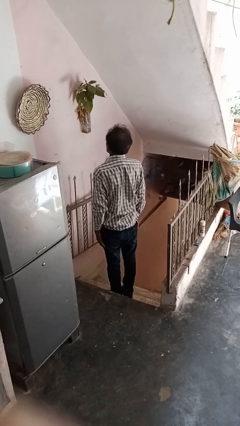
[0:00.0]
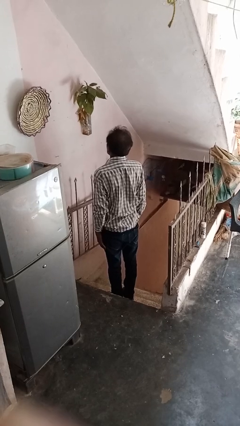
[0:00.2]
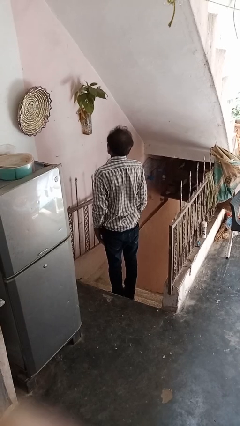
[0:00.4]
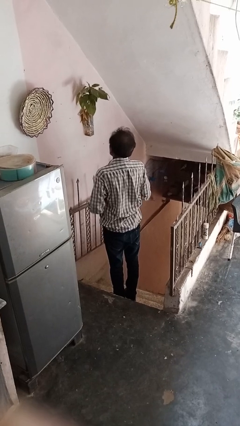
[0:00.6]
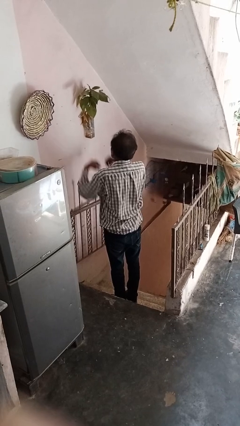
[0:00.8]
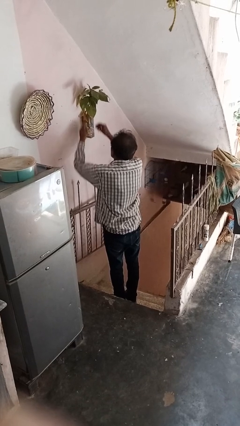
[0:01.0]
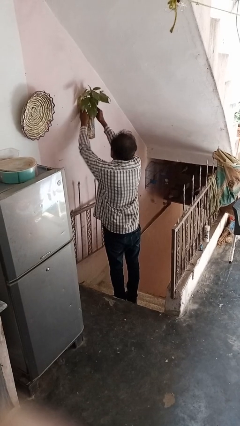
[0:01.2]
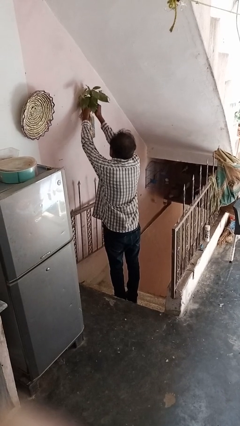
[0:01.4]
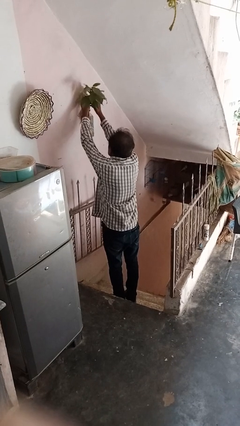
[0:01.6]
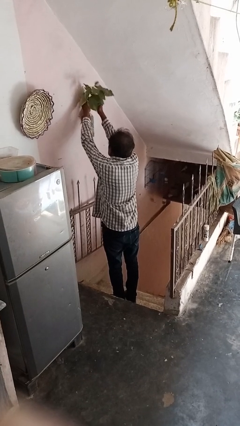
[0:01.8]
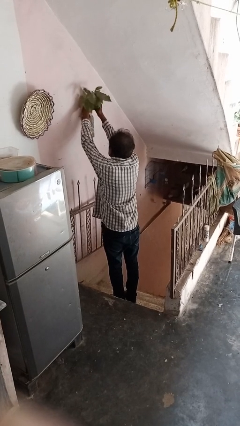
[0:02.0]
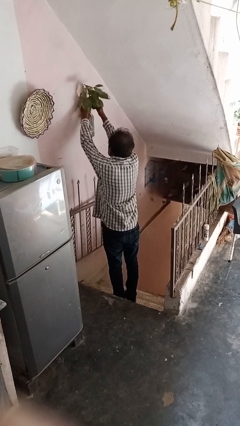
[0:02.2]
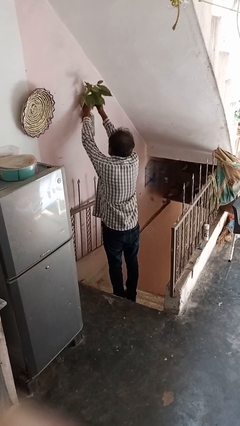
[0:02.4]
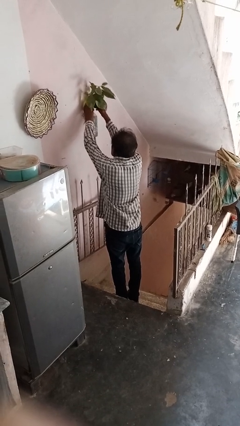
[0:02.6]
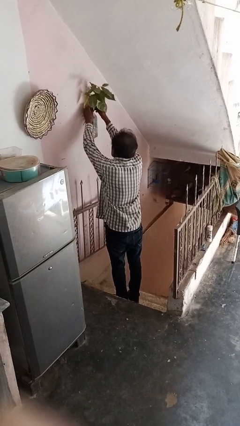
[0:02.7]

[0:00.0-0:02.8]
person arranges flowers in vase

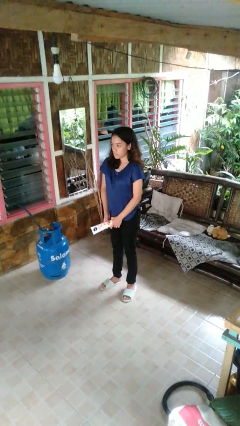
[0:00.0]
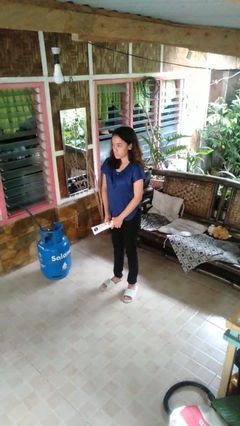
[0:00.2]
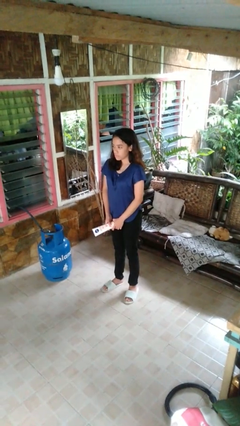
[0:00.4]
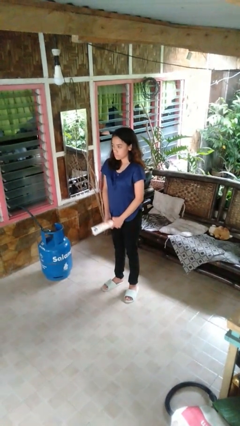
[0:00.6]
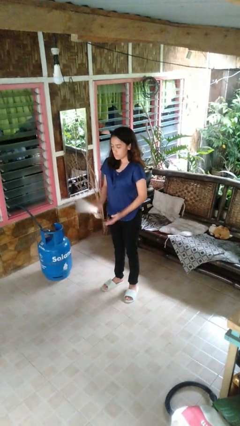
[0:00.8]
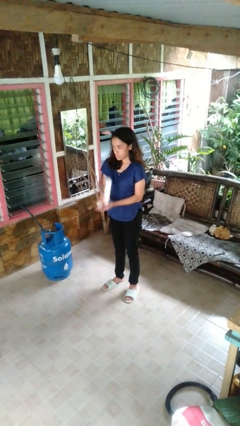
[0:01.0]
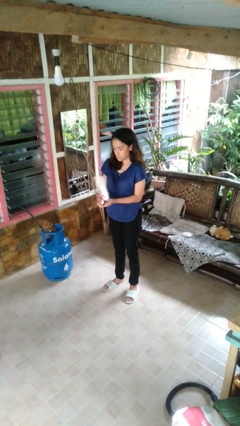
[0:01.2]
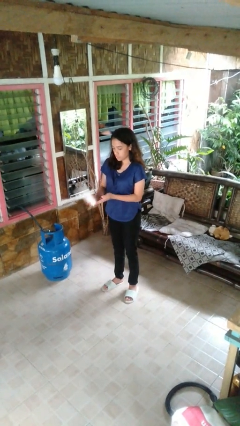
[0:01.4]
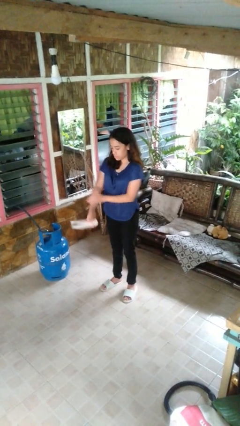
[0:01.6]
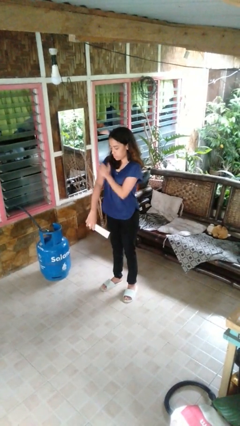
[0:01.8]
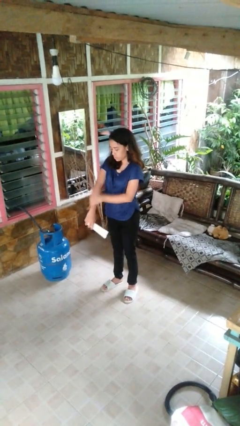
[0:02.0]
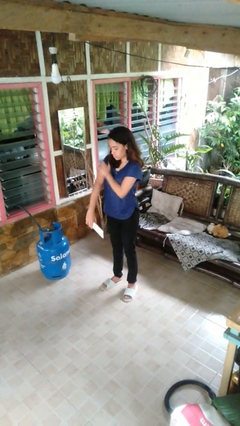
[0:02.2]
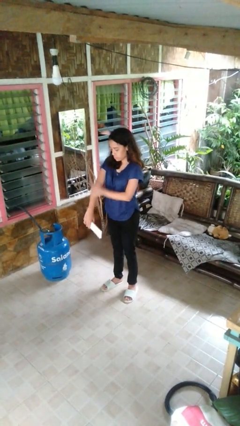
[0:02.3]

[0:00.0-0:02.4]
person applies sunscreen

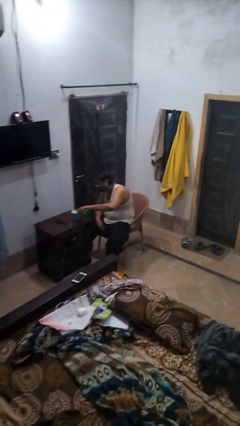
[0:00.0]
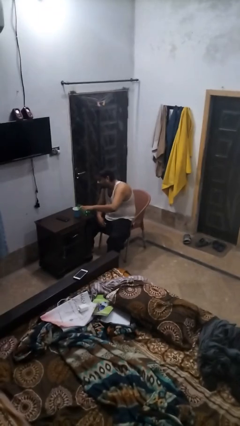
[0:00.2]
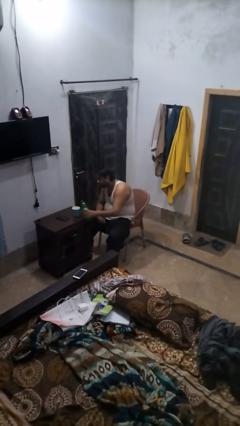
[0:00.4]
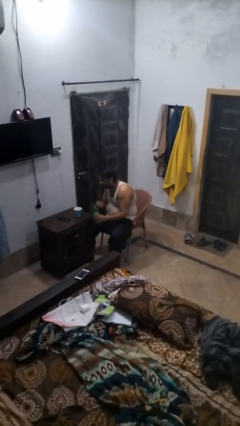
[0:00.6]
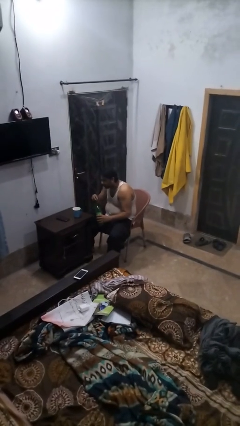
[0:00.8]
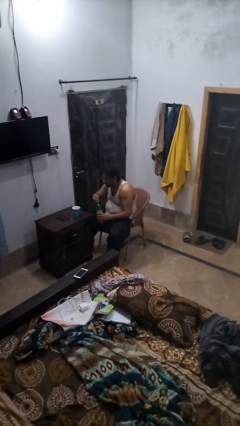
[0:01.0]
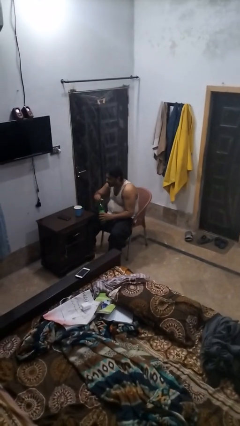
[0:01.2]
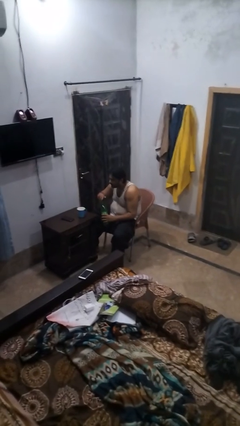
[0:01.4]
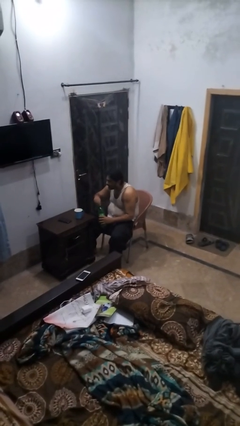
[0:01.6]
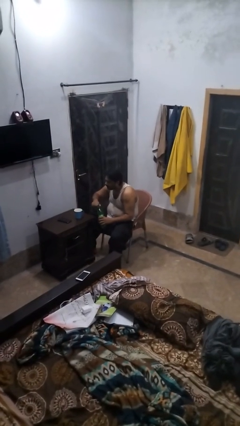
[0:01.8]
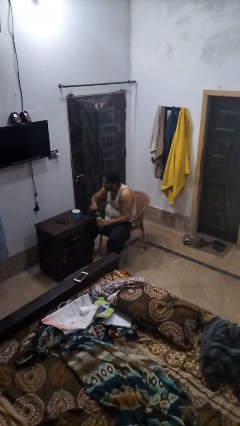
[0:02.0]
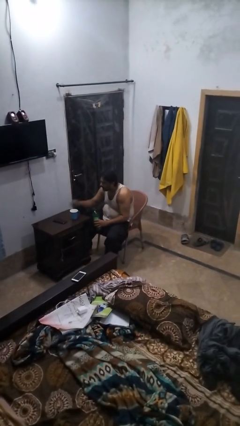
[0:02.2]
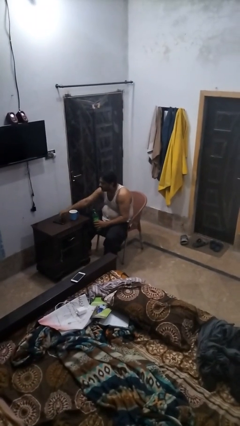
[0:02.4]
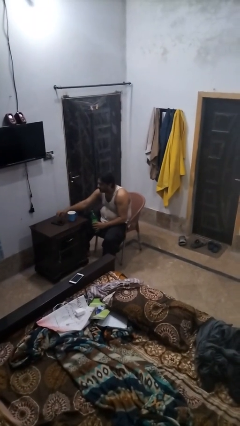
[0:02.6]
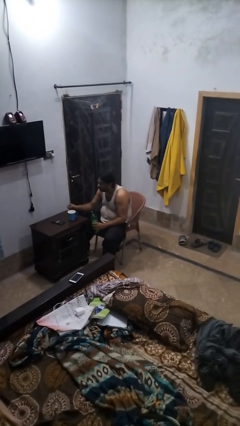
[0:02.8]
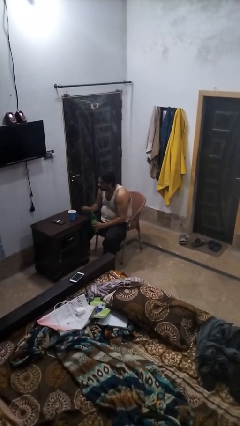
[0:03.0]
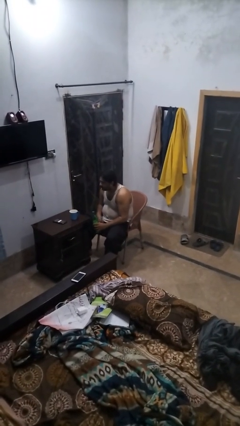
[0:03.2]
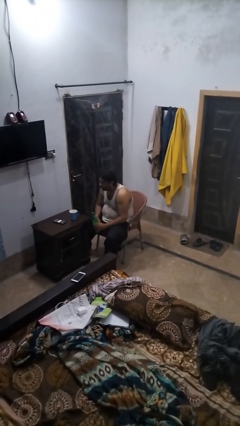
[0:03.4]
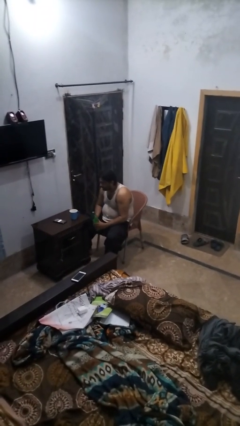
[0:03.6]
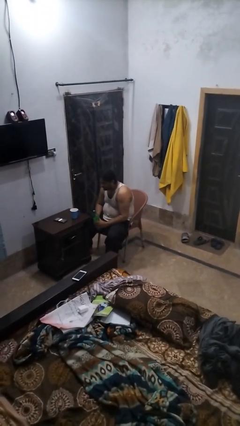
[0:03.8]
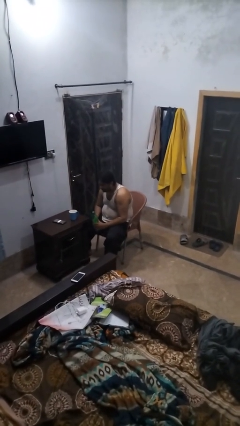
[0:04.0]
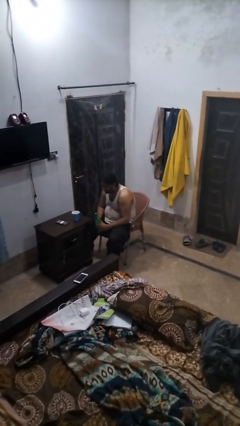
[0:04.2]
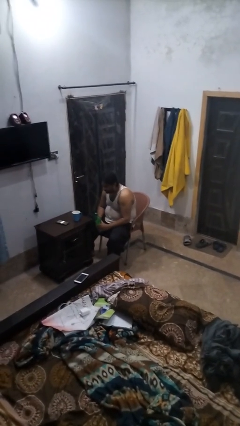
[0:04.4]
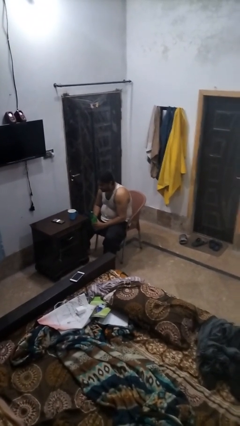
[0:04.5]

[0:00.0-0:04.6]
person screws lid to bottle

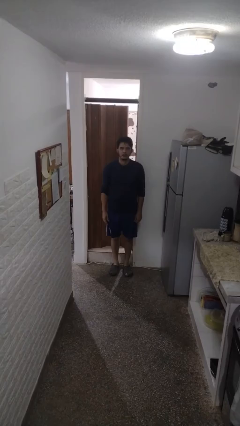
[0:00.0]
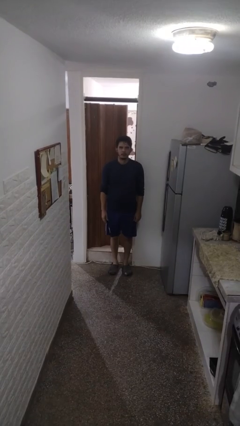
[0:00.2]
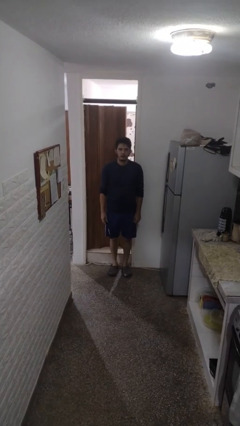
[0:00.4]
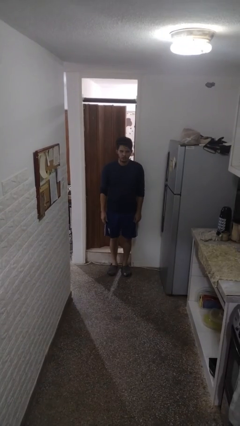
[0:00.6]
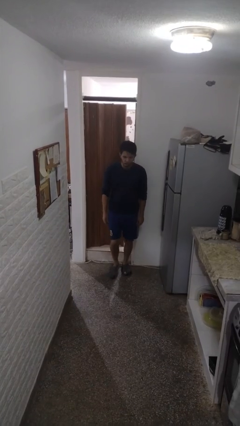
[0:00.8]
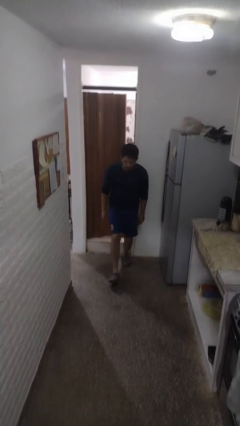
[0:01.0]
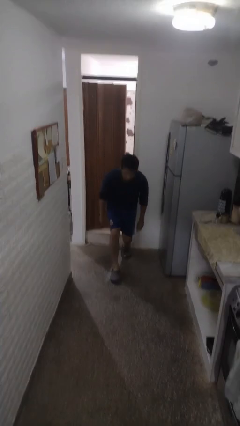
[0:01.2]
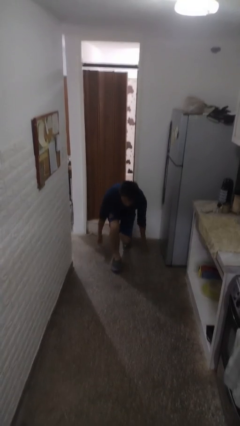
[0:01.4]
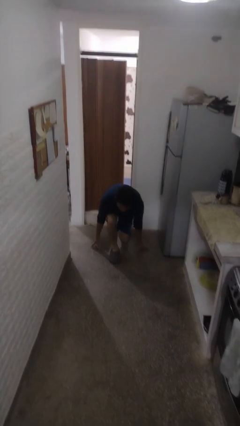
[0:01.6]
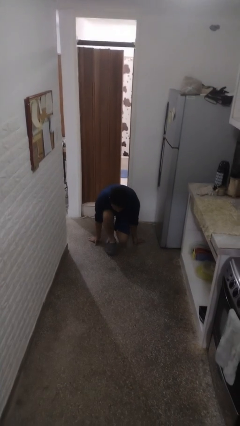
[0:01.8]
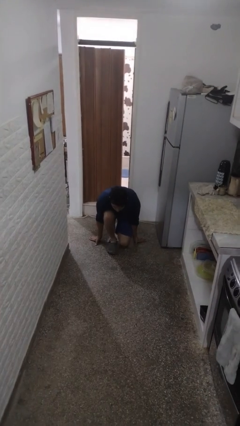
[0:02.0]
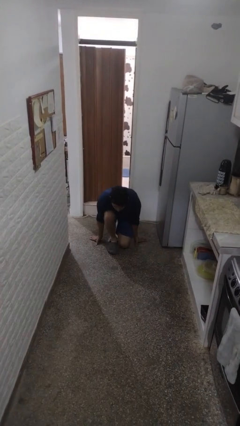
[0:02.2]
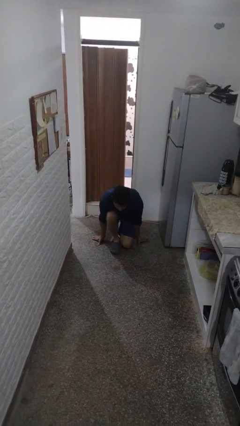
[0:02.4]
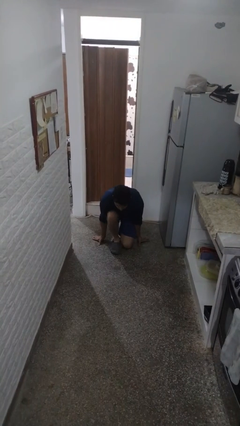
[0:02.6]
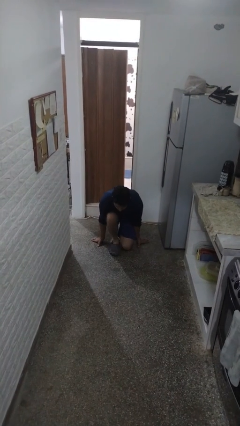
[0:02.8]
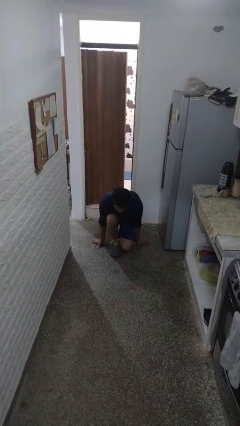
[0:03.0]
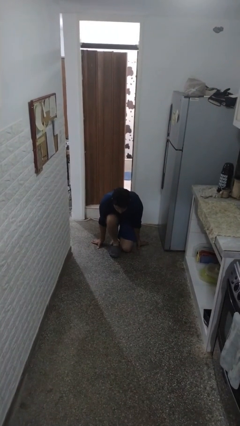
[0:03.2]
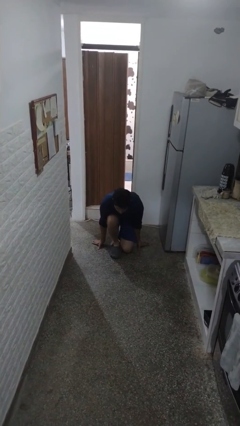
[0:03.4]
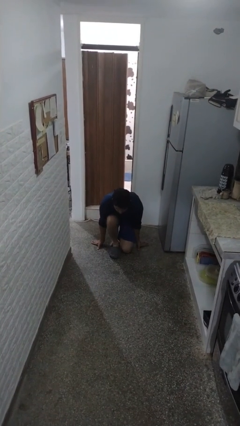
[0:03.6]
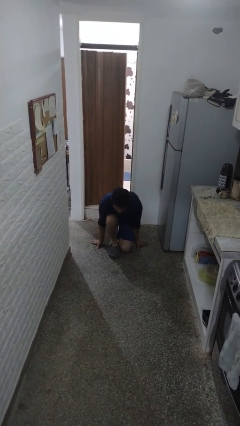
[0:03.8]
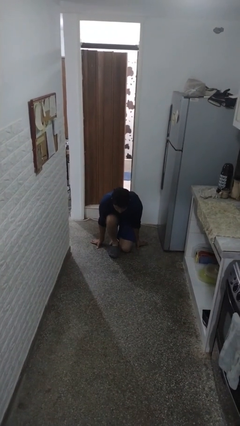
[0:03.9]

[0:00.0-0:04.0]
person kneels

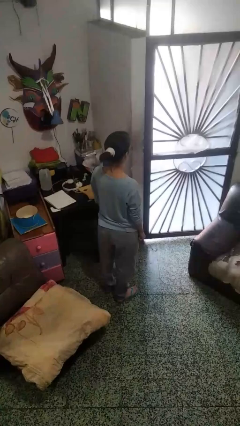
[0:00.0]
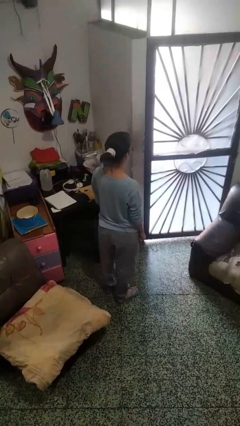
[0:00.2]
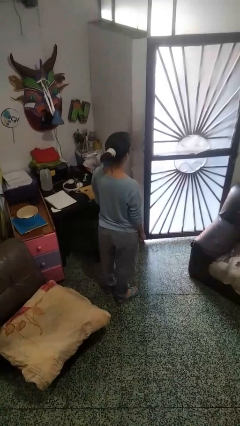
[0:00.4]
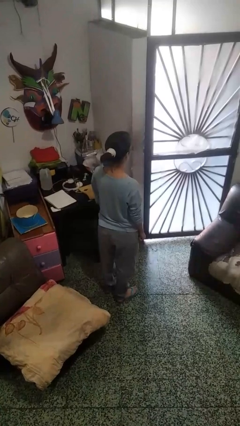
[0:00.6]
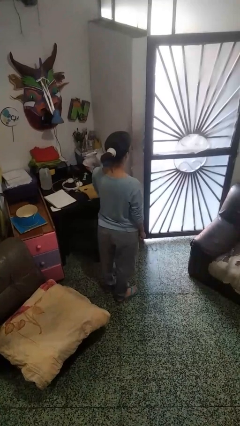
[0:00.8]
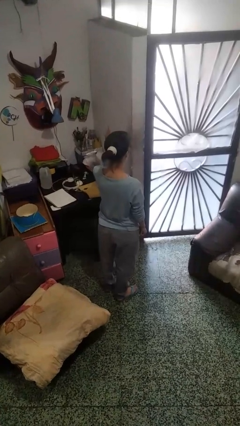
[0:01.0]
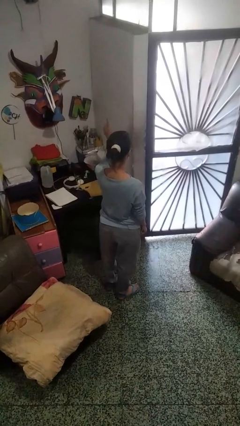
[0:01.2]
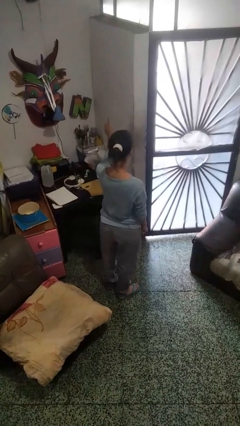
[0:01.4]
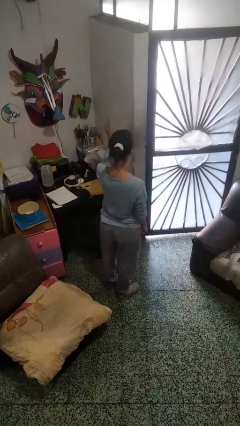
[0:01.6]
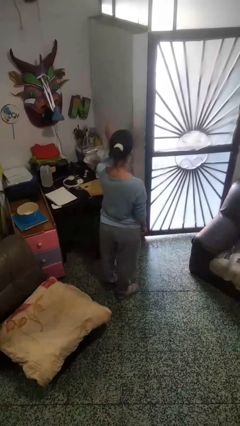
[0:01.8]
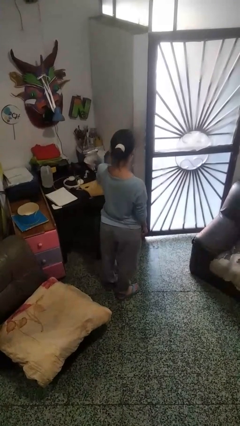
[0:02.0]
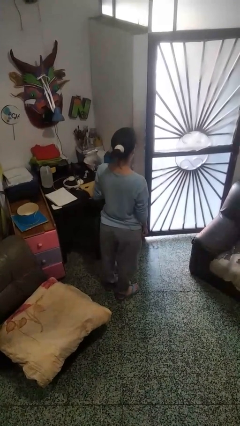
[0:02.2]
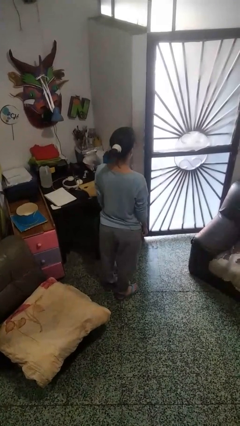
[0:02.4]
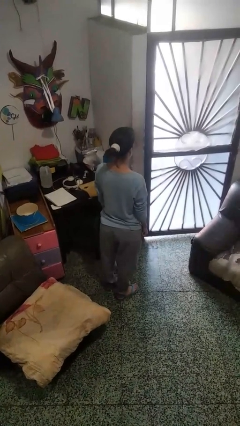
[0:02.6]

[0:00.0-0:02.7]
person gestures number one

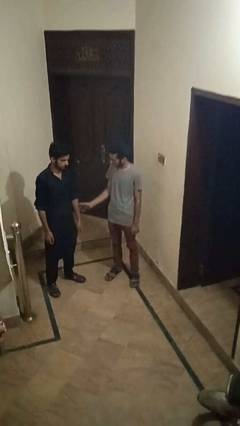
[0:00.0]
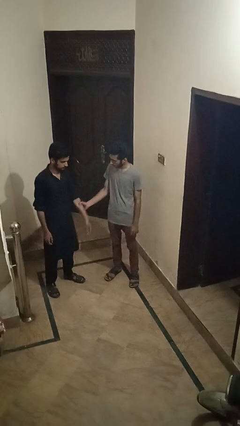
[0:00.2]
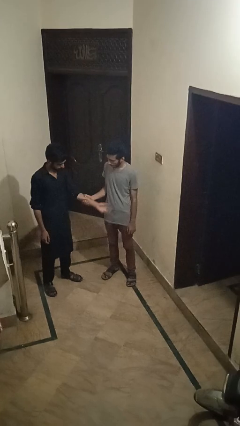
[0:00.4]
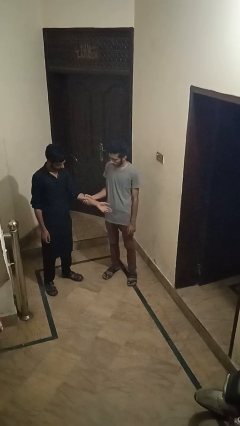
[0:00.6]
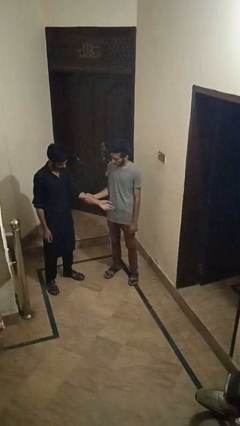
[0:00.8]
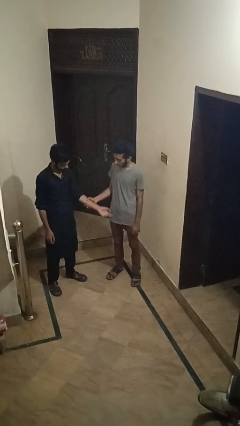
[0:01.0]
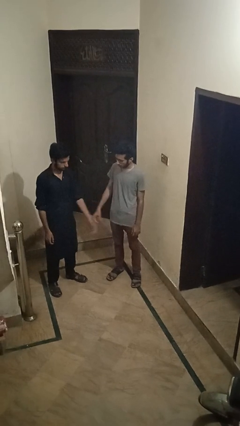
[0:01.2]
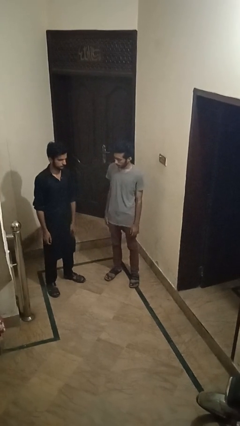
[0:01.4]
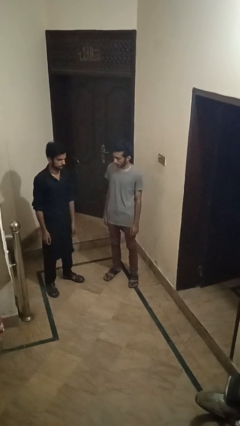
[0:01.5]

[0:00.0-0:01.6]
person grabs person by forearm
